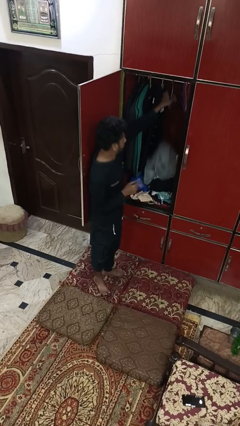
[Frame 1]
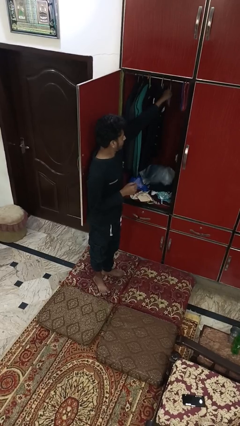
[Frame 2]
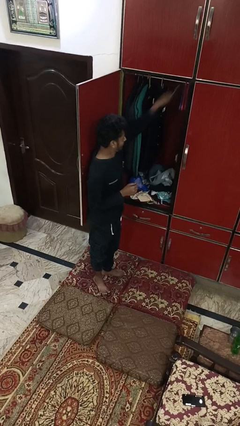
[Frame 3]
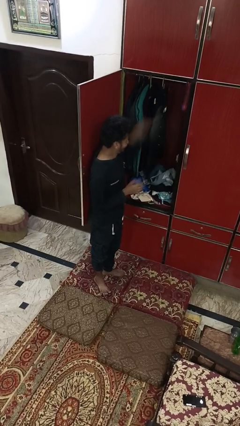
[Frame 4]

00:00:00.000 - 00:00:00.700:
person takes clothes from closet

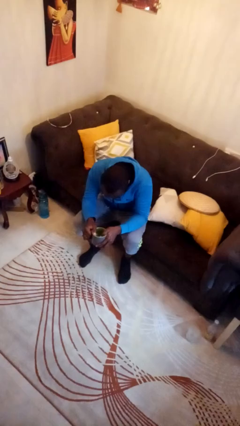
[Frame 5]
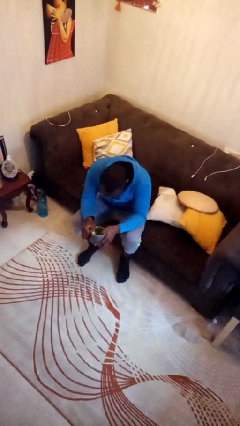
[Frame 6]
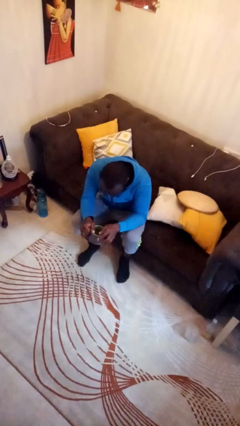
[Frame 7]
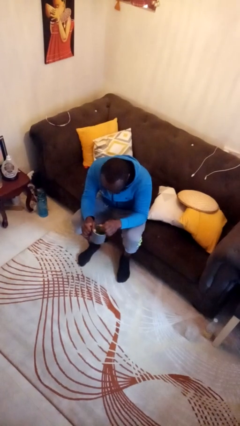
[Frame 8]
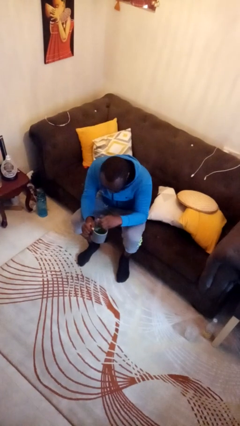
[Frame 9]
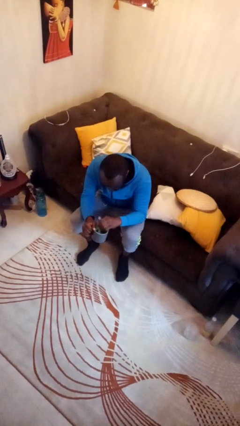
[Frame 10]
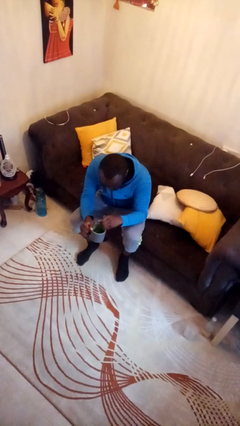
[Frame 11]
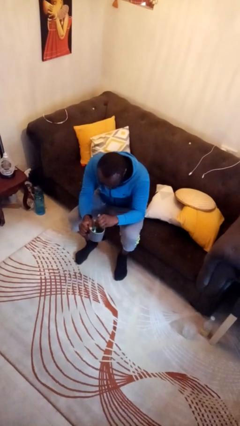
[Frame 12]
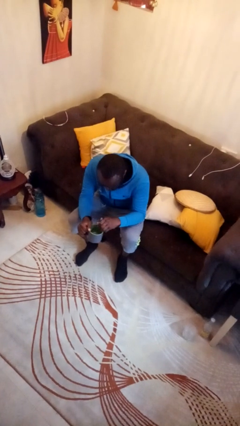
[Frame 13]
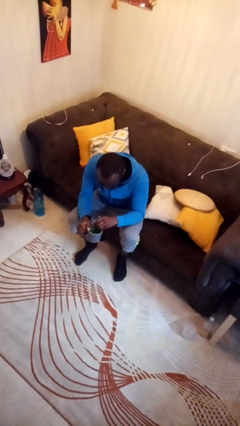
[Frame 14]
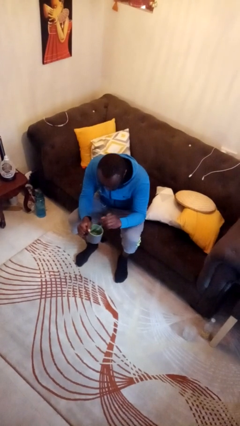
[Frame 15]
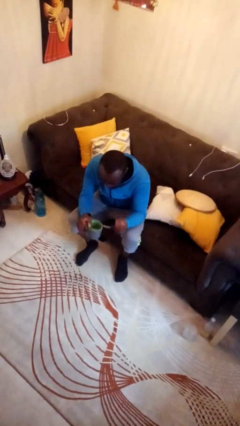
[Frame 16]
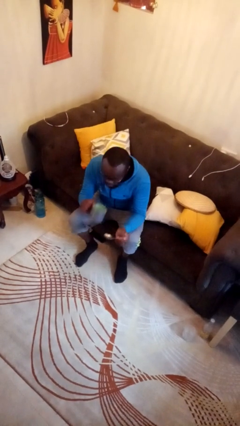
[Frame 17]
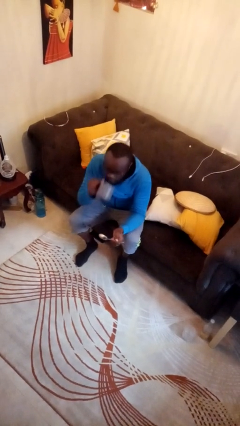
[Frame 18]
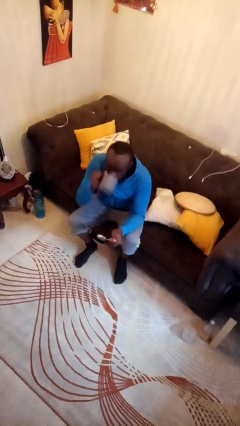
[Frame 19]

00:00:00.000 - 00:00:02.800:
person stirs mug

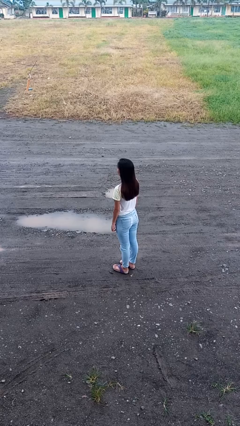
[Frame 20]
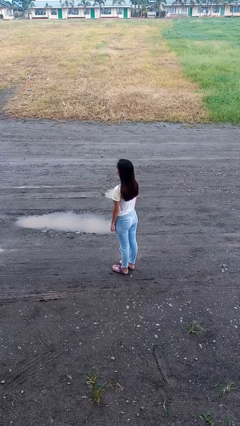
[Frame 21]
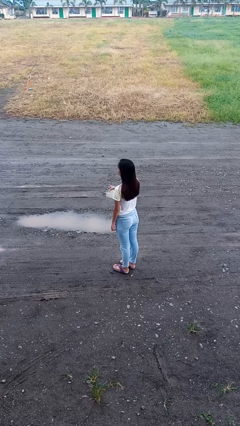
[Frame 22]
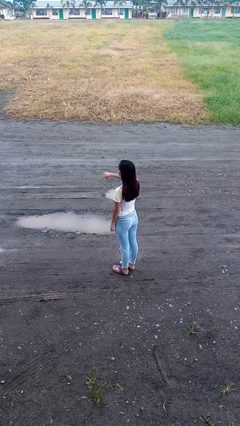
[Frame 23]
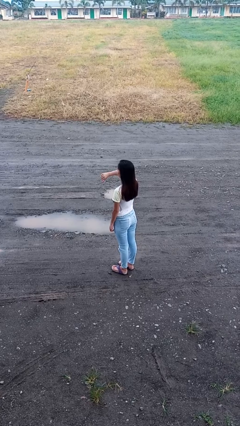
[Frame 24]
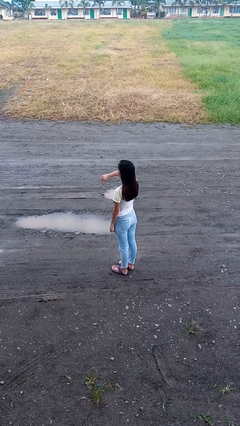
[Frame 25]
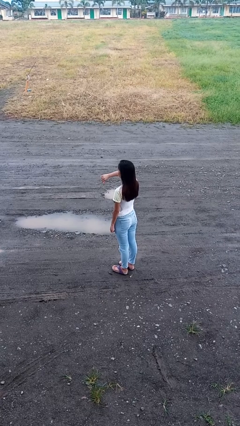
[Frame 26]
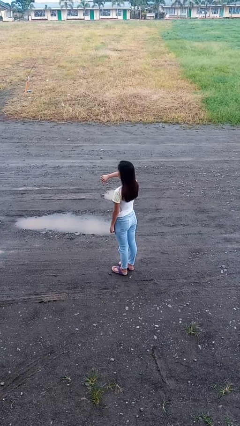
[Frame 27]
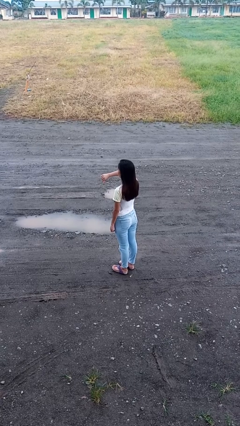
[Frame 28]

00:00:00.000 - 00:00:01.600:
person gestures thumbs down

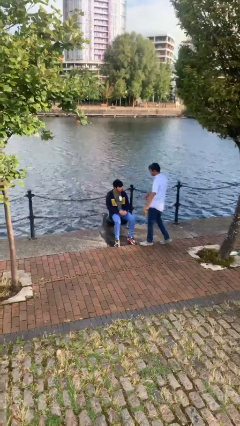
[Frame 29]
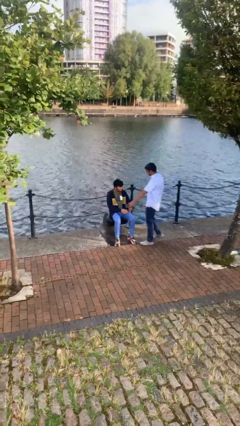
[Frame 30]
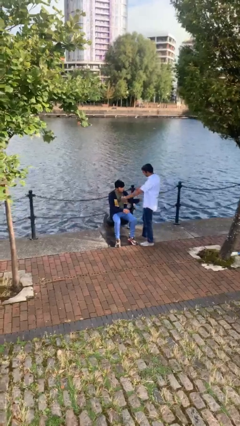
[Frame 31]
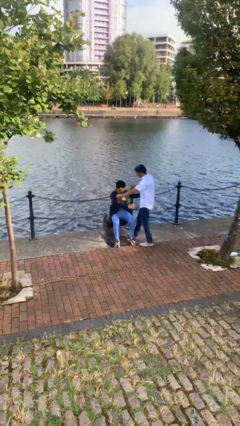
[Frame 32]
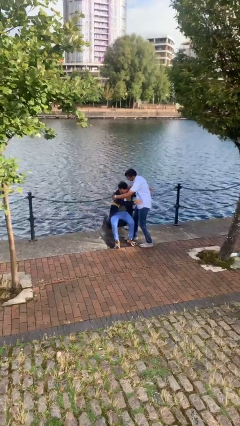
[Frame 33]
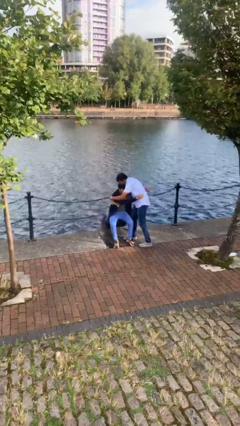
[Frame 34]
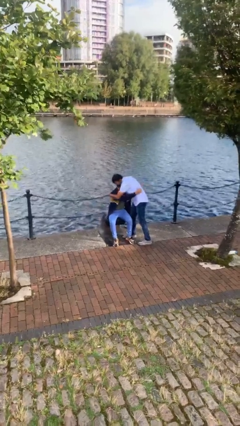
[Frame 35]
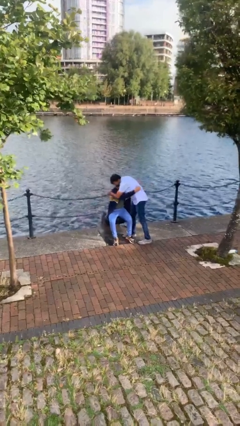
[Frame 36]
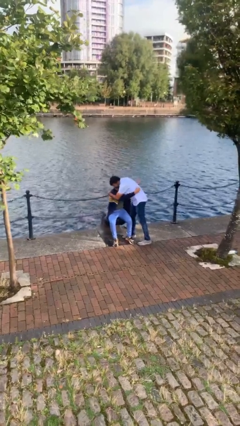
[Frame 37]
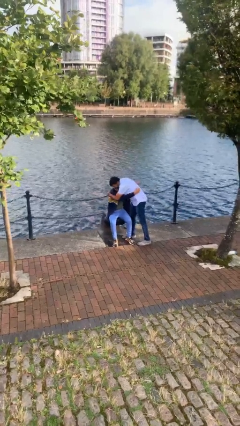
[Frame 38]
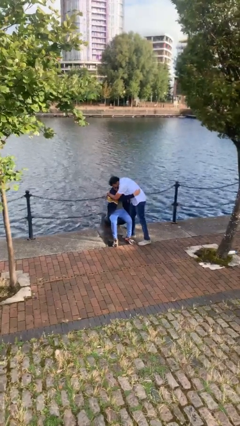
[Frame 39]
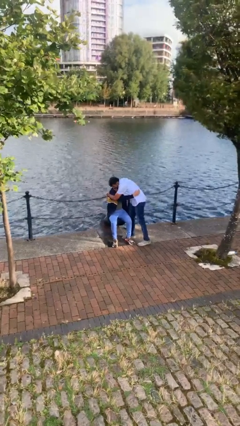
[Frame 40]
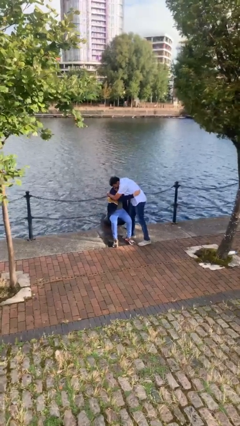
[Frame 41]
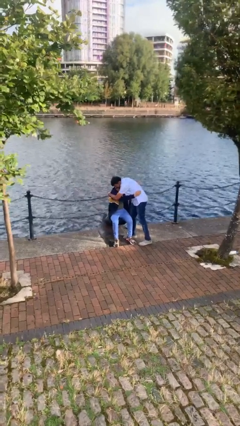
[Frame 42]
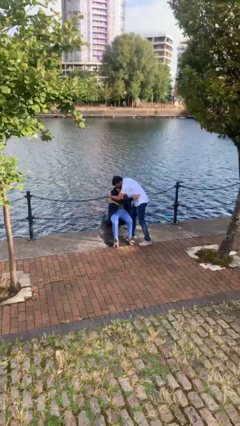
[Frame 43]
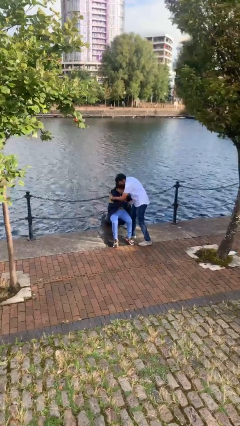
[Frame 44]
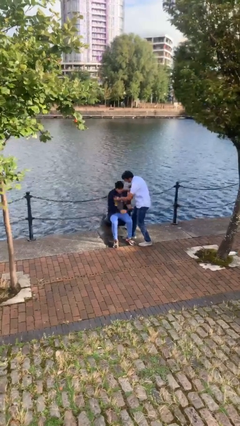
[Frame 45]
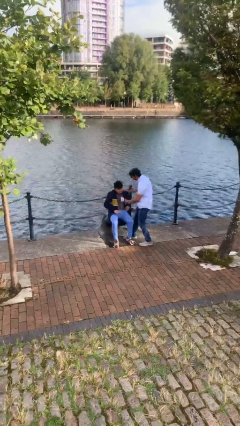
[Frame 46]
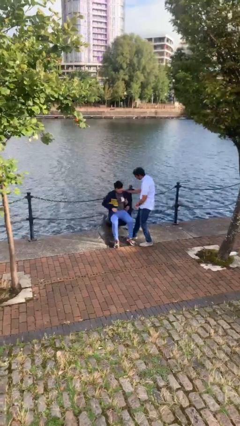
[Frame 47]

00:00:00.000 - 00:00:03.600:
person embraces person

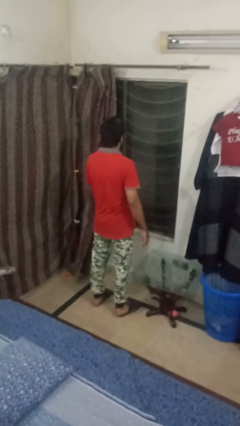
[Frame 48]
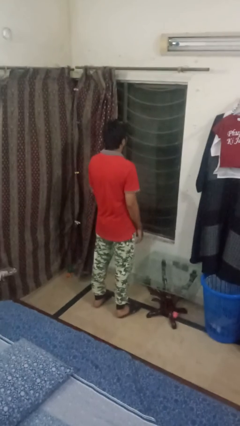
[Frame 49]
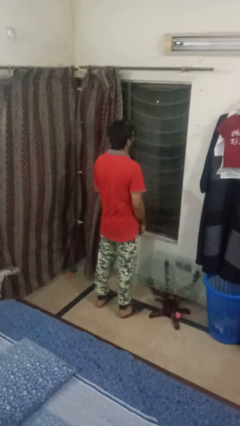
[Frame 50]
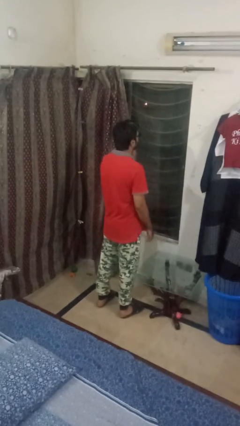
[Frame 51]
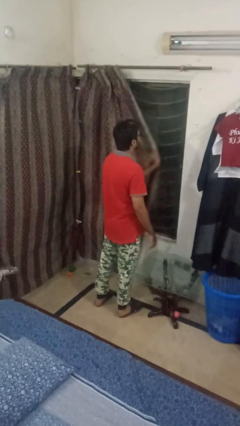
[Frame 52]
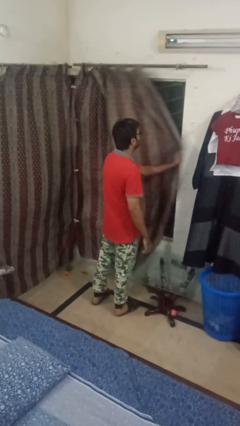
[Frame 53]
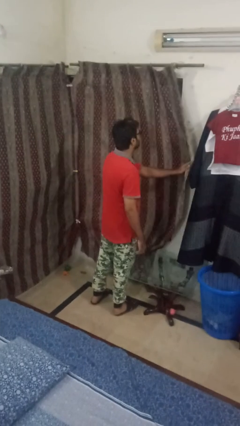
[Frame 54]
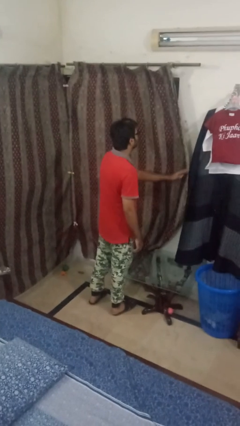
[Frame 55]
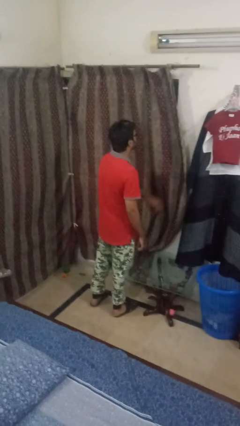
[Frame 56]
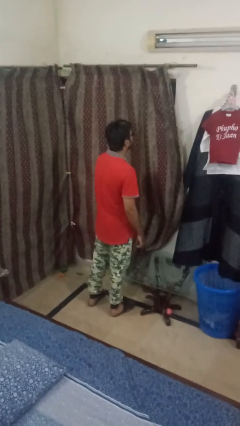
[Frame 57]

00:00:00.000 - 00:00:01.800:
person closes curtains

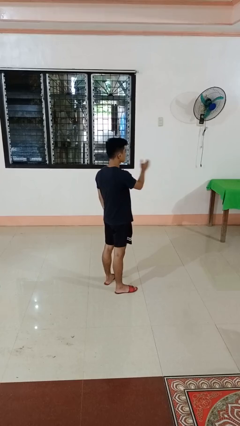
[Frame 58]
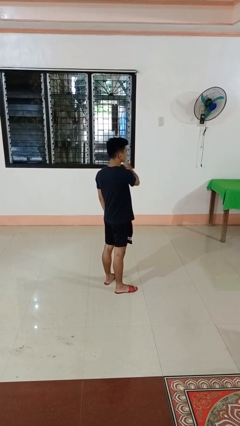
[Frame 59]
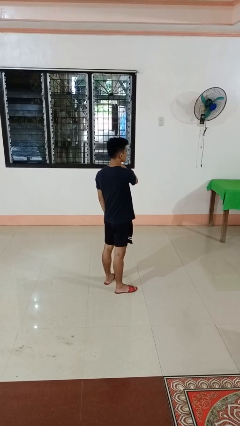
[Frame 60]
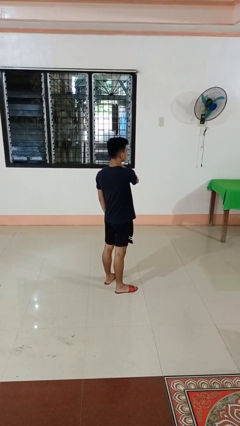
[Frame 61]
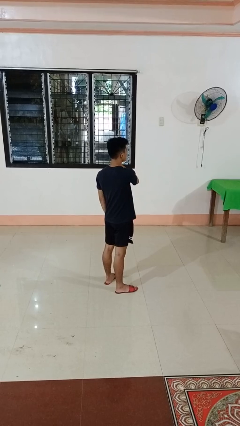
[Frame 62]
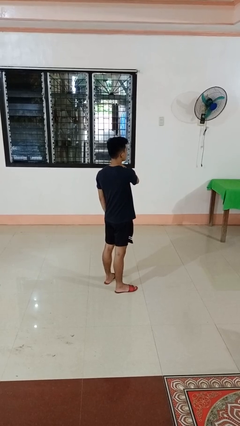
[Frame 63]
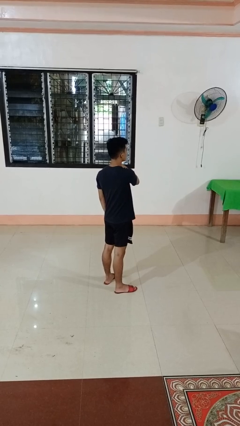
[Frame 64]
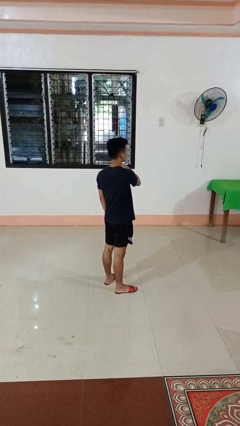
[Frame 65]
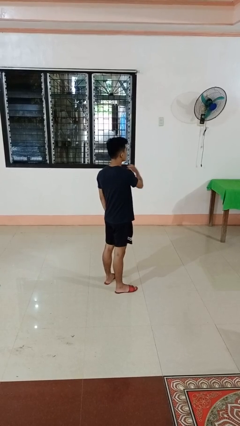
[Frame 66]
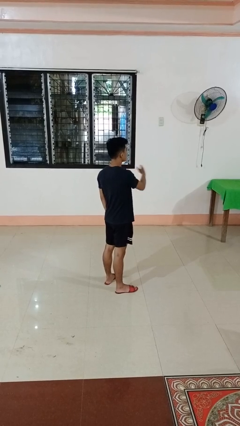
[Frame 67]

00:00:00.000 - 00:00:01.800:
person gestures swipe left

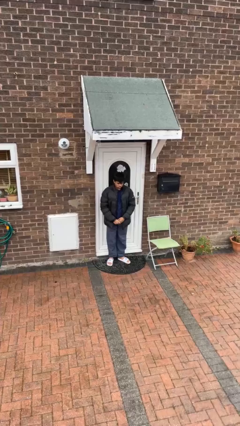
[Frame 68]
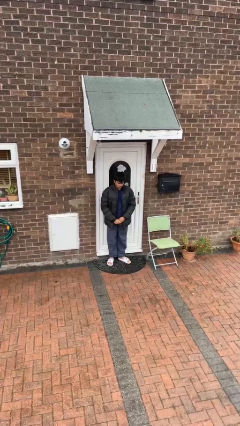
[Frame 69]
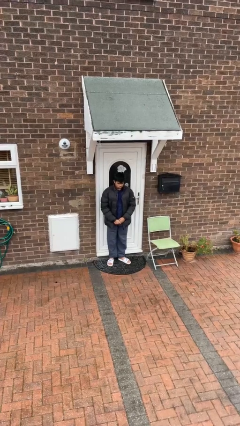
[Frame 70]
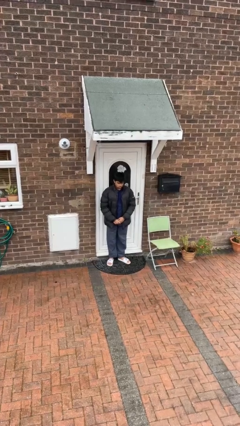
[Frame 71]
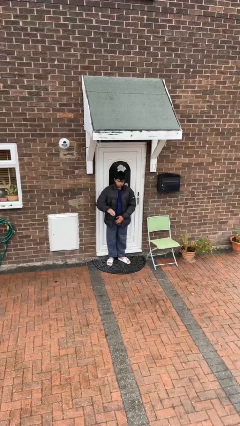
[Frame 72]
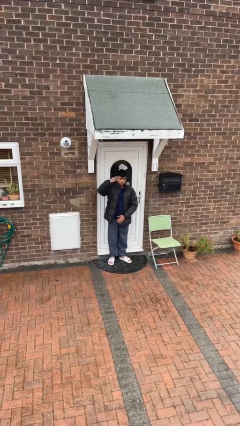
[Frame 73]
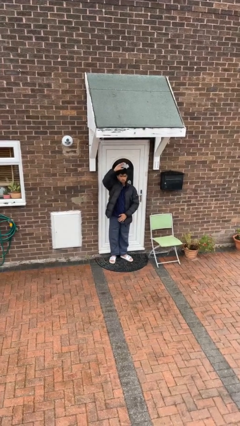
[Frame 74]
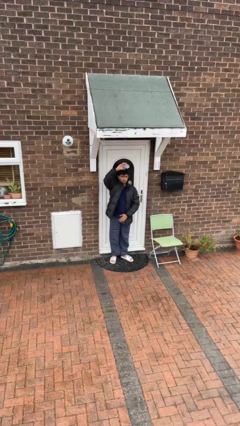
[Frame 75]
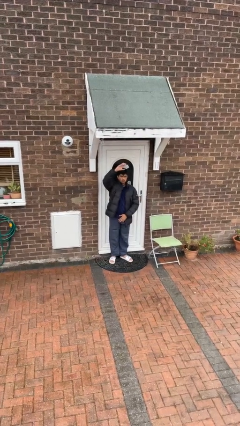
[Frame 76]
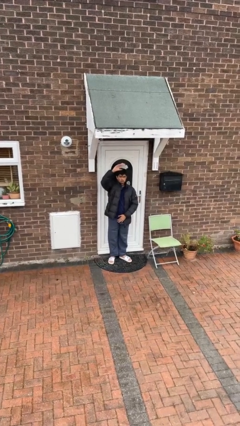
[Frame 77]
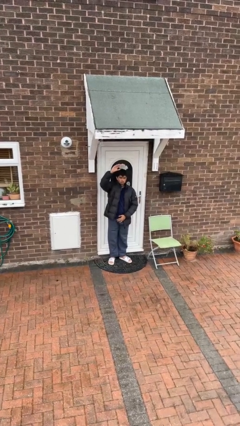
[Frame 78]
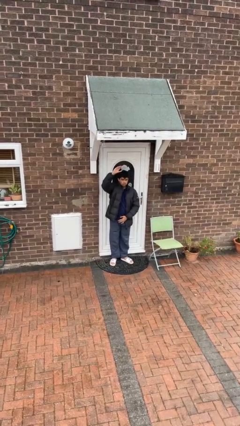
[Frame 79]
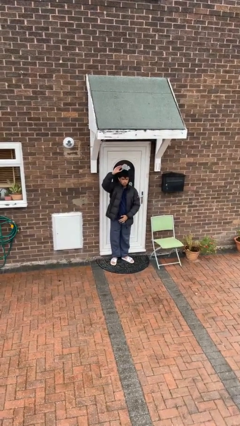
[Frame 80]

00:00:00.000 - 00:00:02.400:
person gestures raise hand

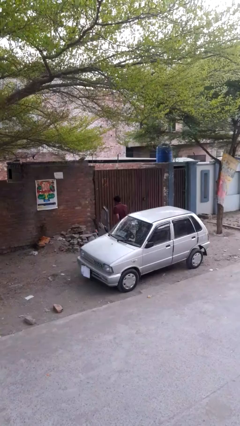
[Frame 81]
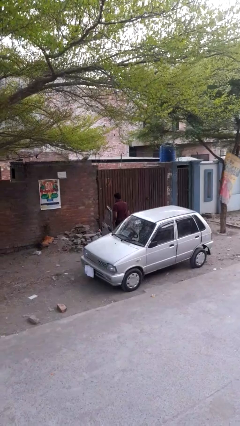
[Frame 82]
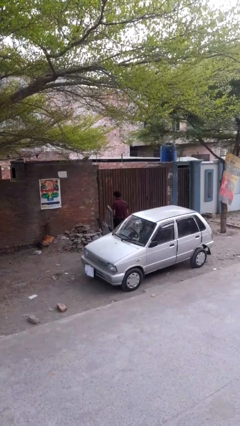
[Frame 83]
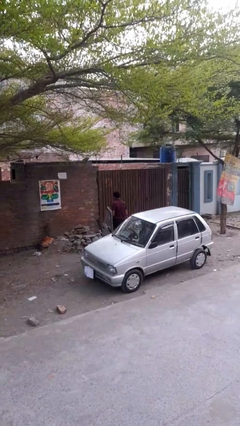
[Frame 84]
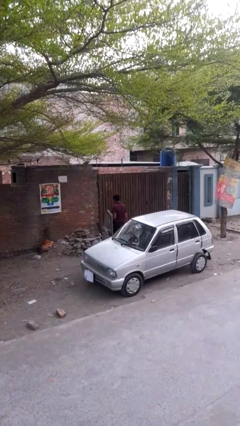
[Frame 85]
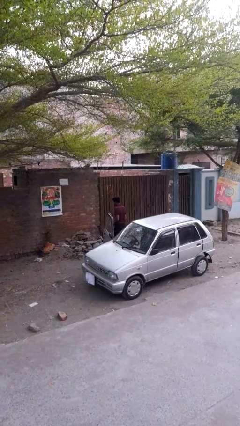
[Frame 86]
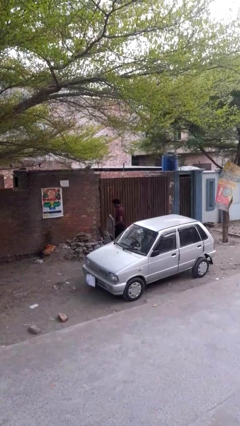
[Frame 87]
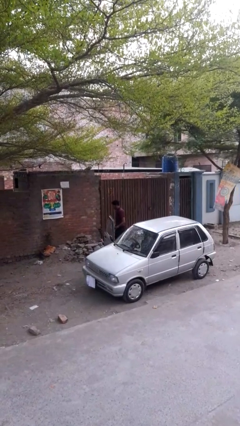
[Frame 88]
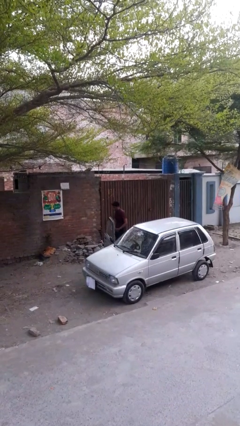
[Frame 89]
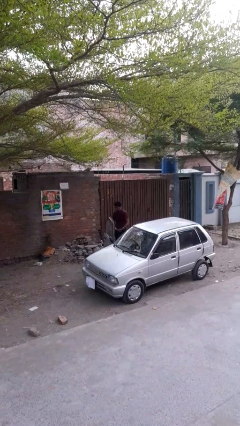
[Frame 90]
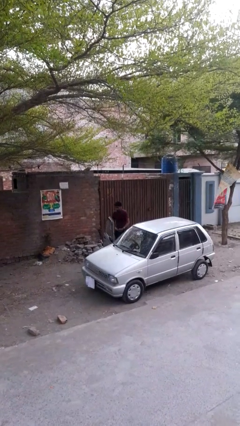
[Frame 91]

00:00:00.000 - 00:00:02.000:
person exits car

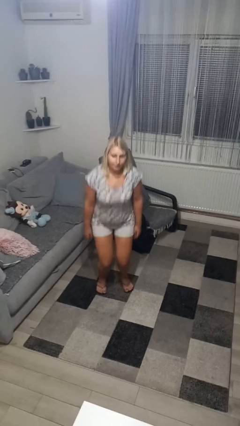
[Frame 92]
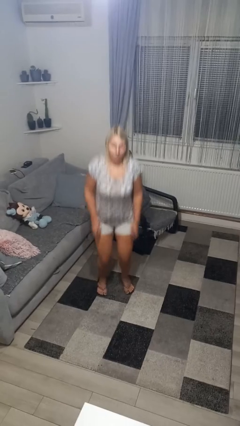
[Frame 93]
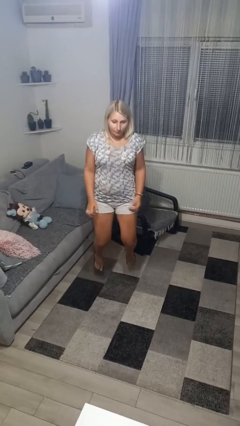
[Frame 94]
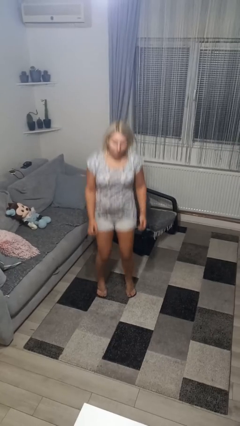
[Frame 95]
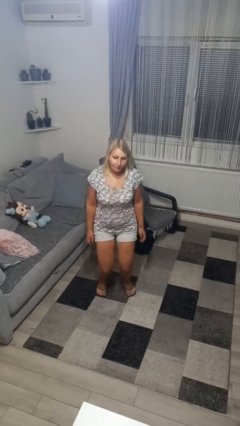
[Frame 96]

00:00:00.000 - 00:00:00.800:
person jumps
